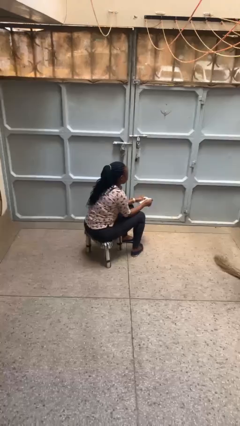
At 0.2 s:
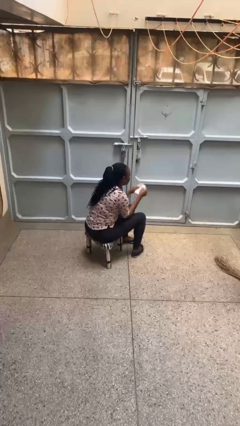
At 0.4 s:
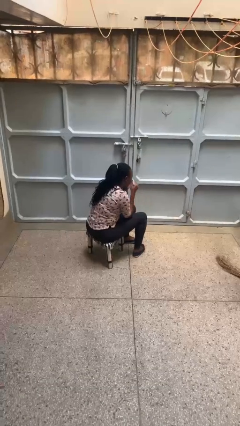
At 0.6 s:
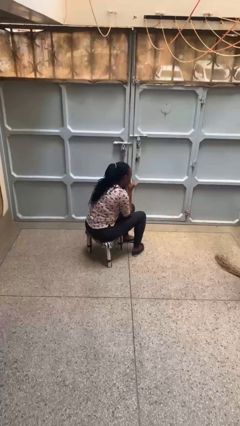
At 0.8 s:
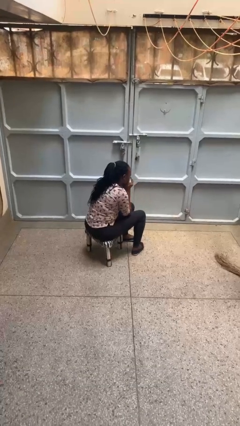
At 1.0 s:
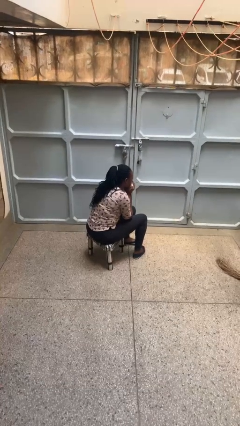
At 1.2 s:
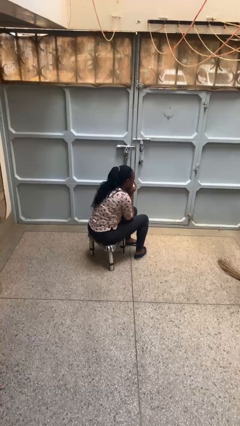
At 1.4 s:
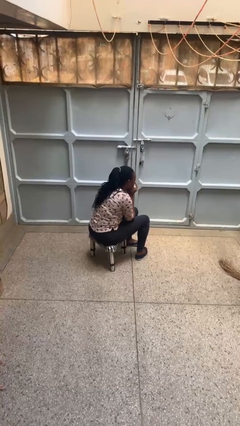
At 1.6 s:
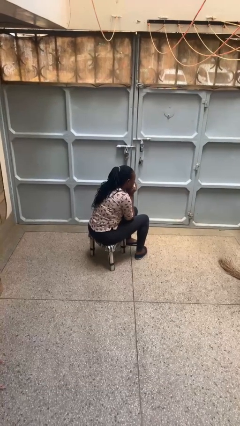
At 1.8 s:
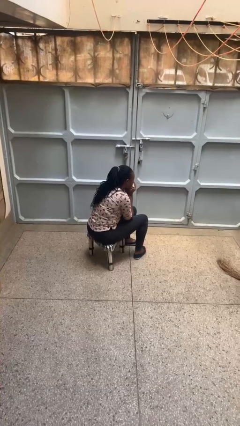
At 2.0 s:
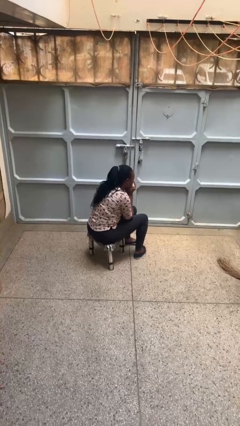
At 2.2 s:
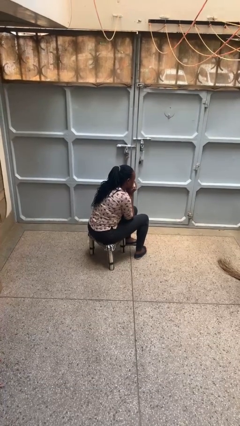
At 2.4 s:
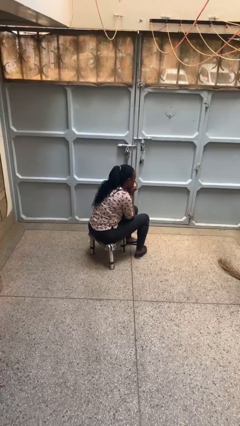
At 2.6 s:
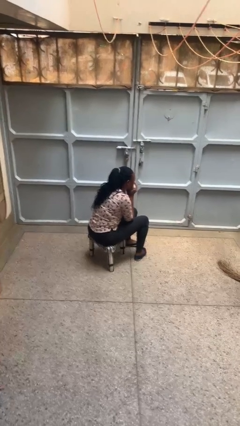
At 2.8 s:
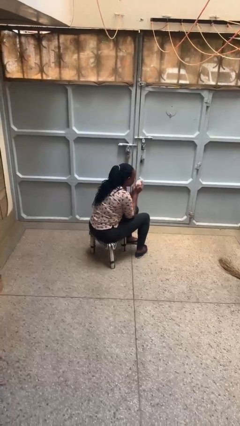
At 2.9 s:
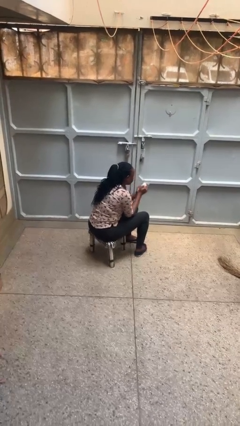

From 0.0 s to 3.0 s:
person blows nose

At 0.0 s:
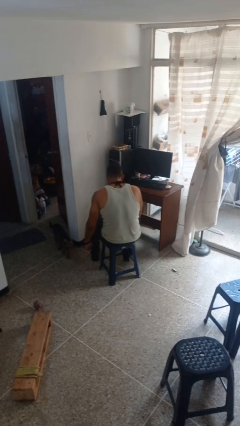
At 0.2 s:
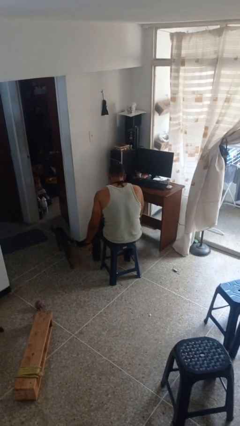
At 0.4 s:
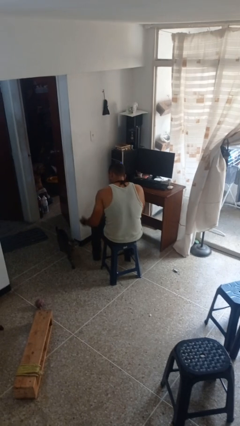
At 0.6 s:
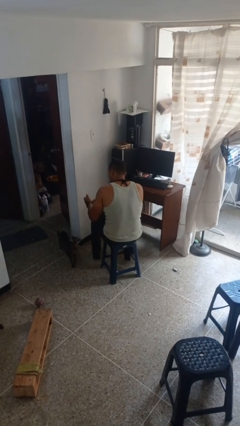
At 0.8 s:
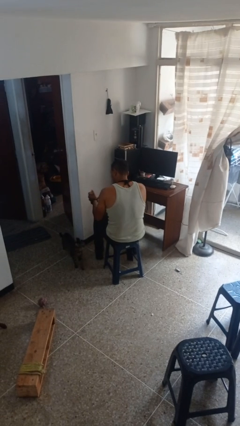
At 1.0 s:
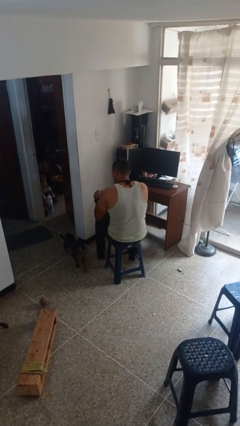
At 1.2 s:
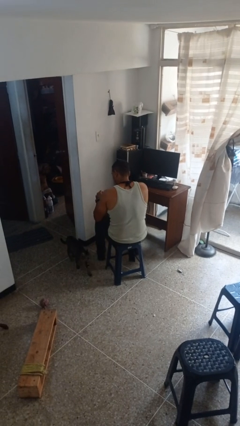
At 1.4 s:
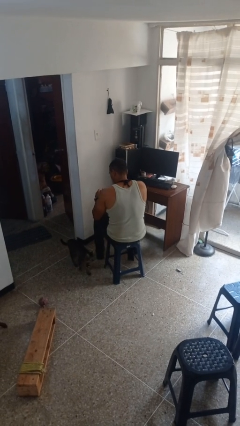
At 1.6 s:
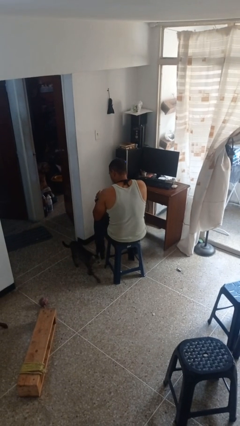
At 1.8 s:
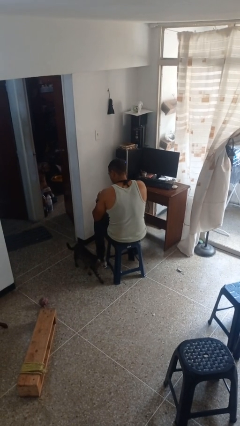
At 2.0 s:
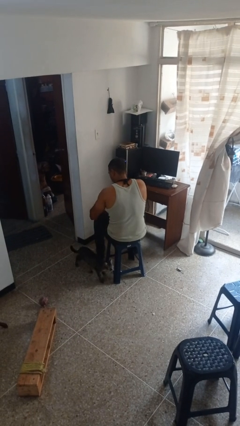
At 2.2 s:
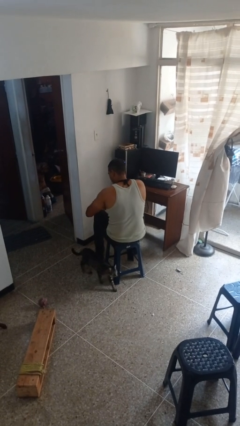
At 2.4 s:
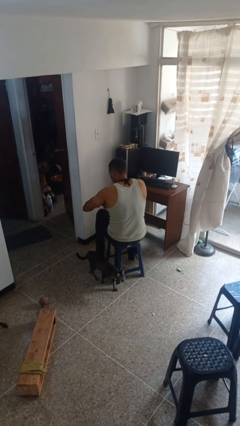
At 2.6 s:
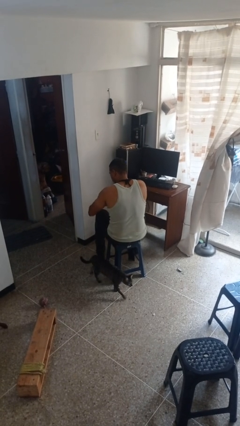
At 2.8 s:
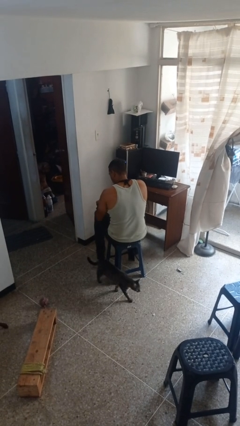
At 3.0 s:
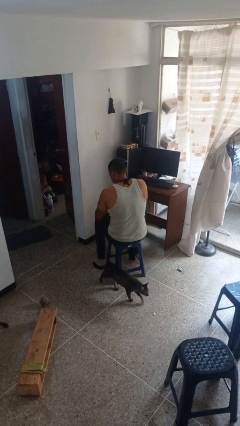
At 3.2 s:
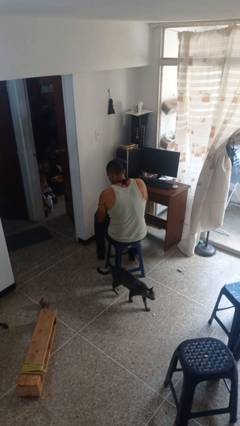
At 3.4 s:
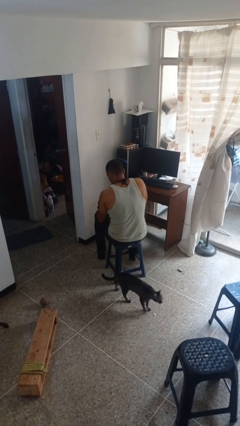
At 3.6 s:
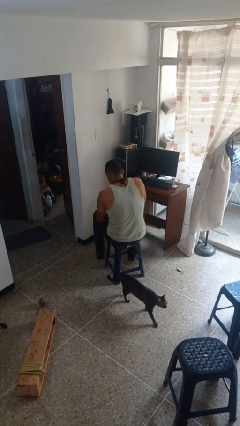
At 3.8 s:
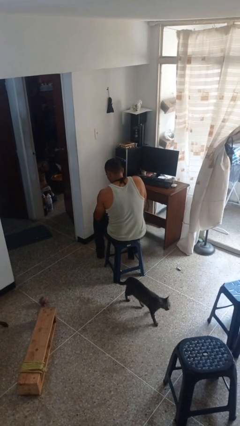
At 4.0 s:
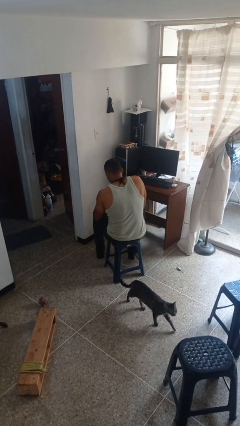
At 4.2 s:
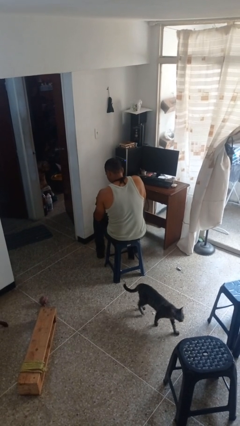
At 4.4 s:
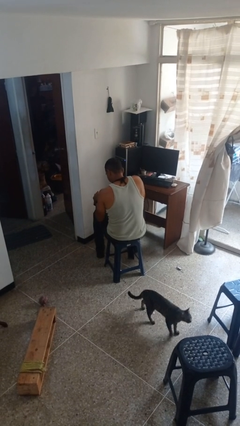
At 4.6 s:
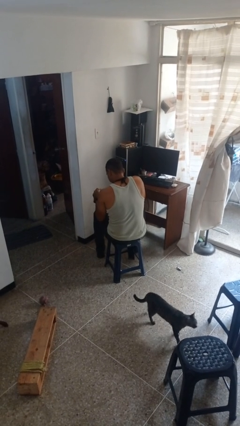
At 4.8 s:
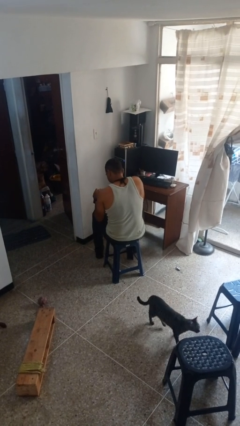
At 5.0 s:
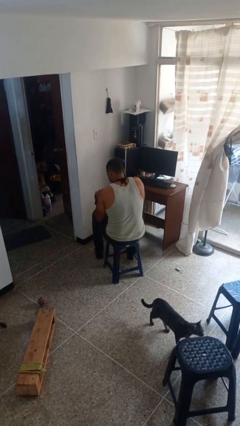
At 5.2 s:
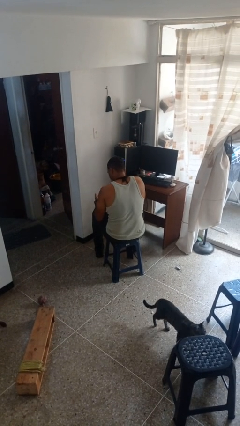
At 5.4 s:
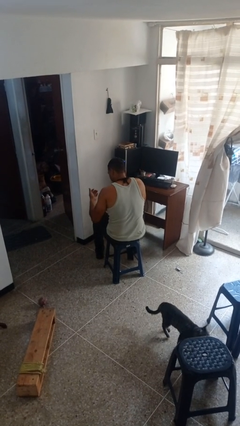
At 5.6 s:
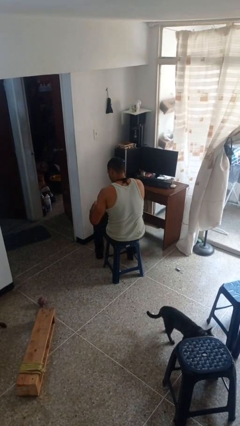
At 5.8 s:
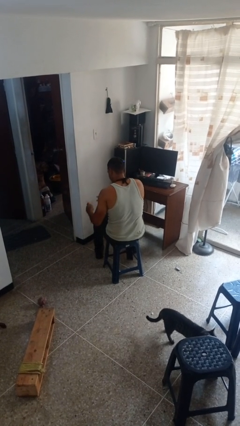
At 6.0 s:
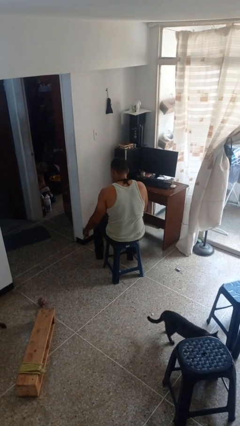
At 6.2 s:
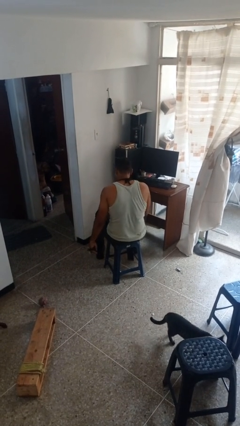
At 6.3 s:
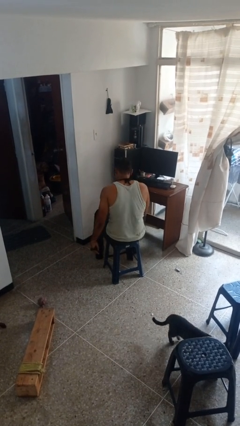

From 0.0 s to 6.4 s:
person takes off wristwatch

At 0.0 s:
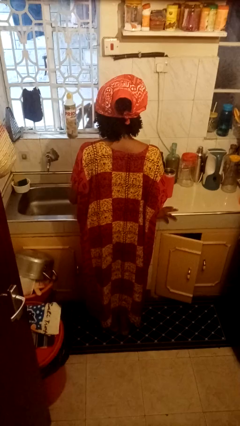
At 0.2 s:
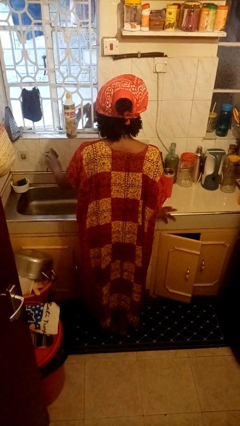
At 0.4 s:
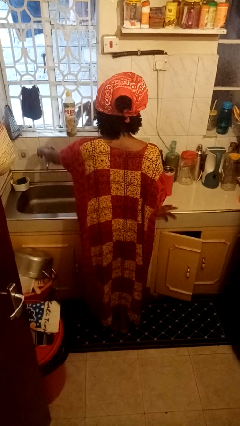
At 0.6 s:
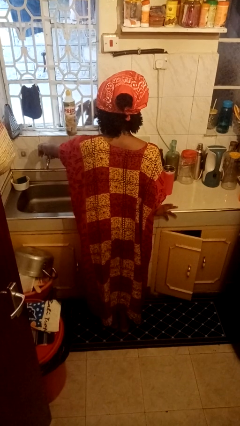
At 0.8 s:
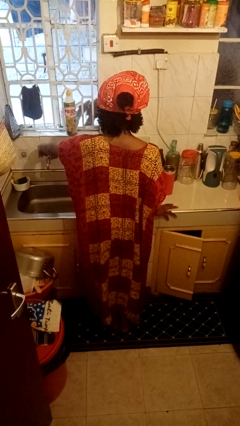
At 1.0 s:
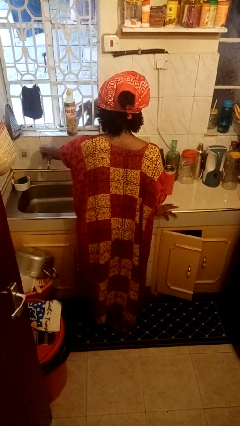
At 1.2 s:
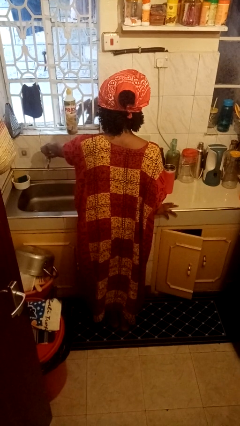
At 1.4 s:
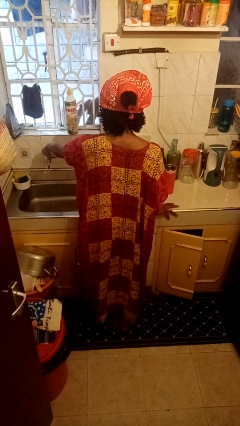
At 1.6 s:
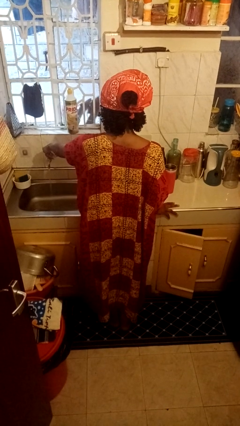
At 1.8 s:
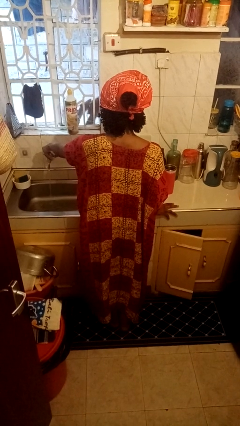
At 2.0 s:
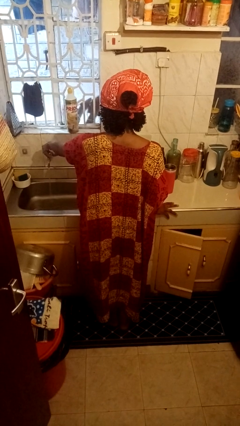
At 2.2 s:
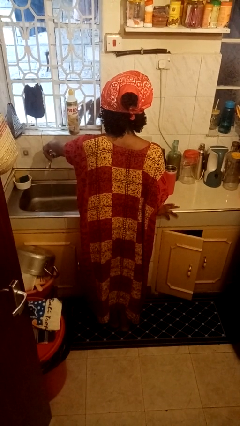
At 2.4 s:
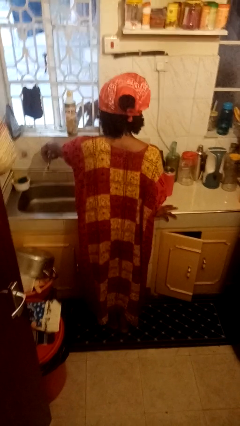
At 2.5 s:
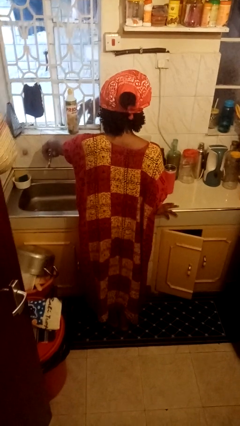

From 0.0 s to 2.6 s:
person turns on faucet

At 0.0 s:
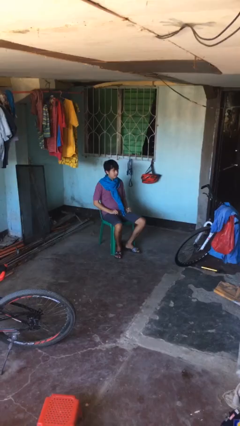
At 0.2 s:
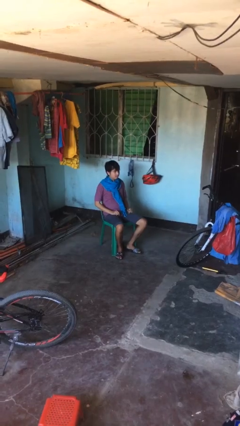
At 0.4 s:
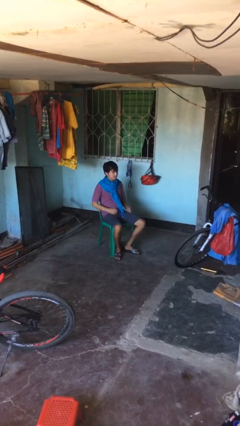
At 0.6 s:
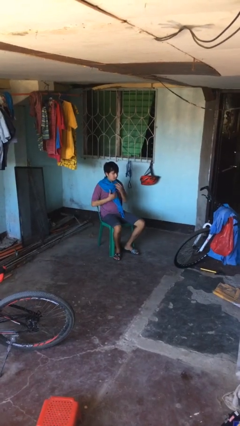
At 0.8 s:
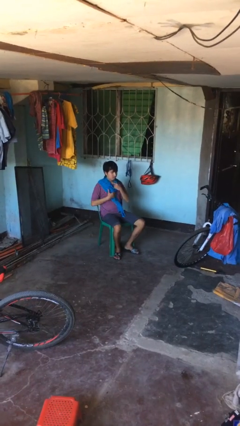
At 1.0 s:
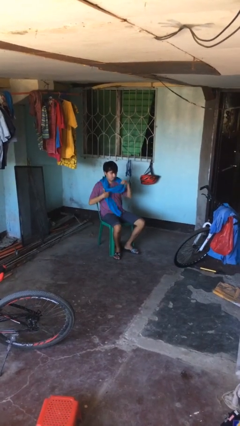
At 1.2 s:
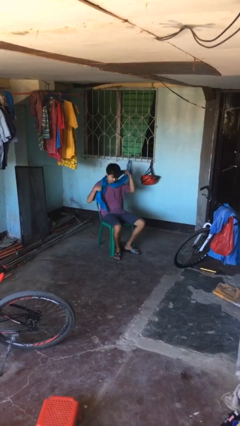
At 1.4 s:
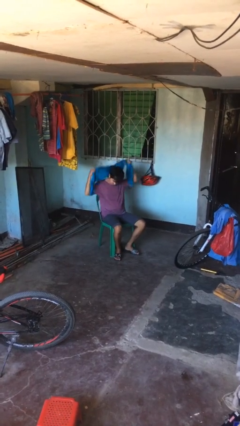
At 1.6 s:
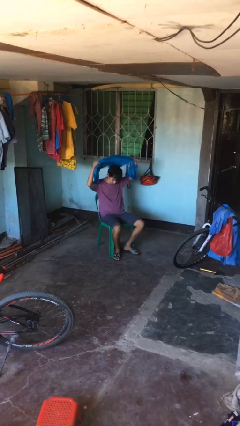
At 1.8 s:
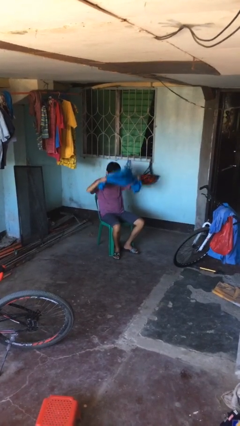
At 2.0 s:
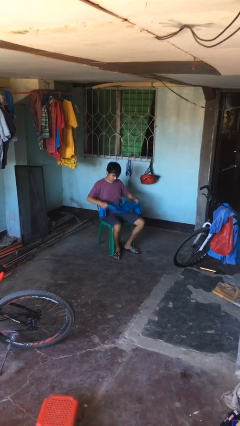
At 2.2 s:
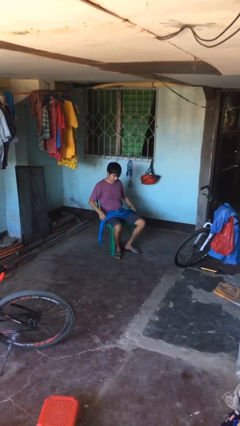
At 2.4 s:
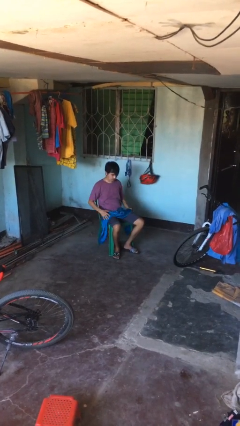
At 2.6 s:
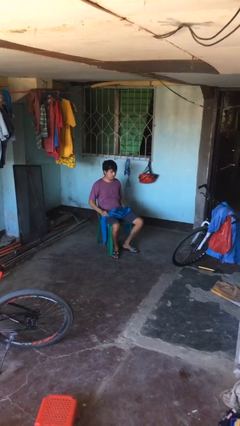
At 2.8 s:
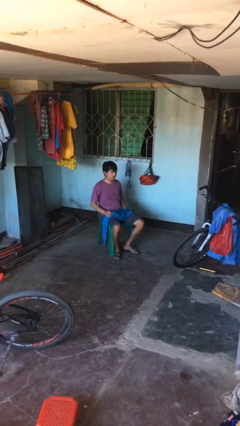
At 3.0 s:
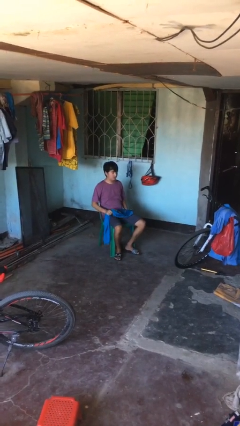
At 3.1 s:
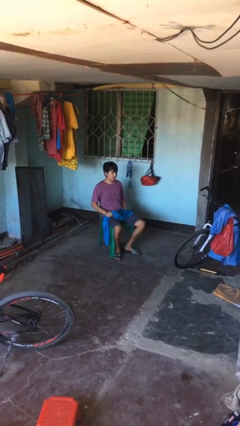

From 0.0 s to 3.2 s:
person takes off scarf

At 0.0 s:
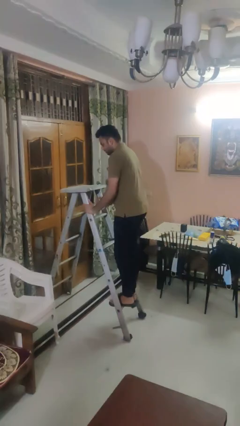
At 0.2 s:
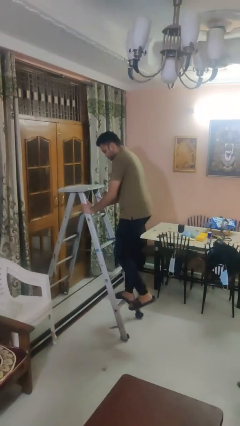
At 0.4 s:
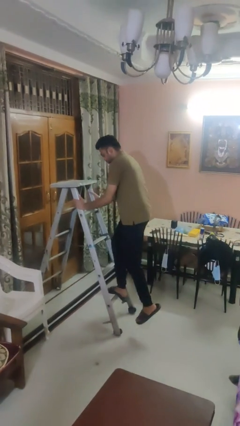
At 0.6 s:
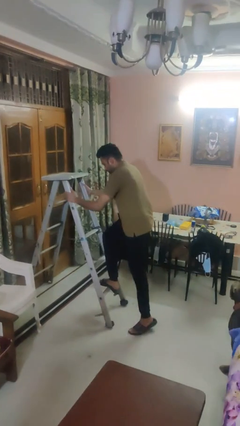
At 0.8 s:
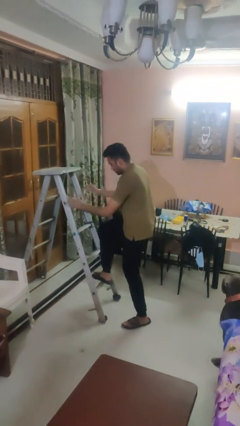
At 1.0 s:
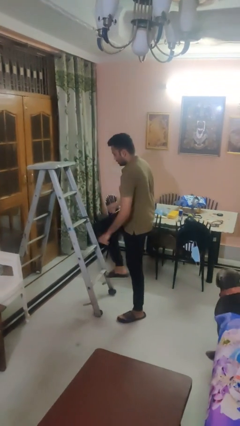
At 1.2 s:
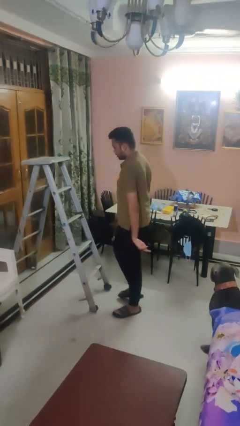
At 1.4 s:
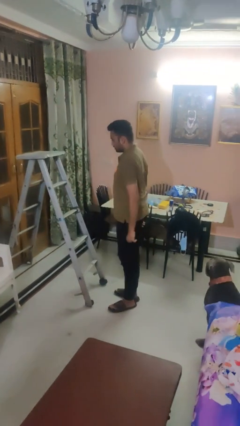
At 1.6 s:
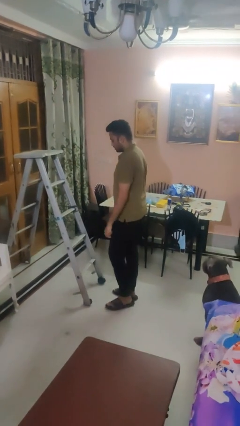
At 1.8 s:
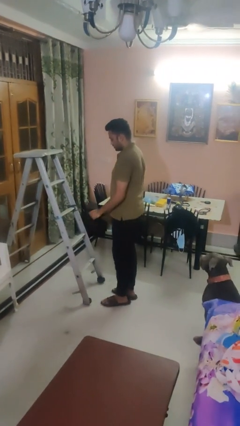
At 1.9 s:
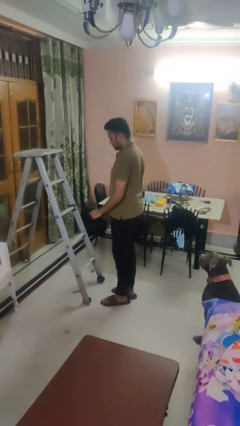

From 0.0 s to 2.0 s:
person climbs down ladder

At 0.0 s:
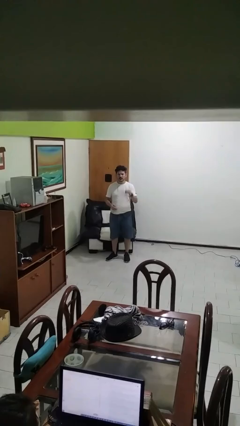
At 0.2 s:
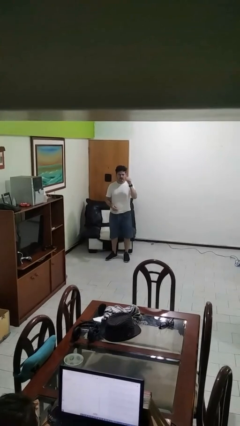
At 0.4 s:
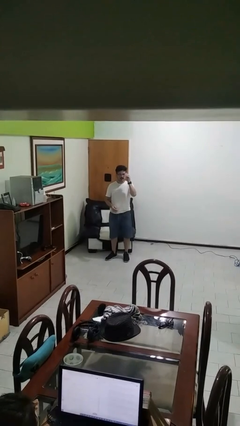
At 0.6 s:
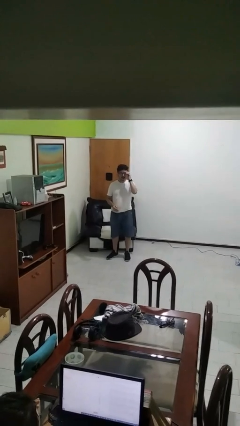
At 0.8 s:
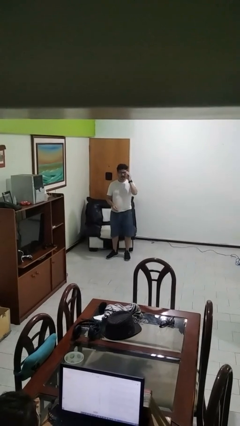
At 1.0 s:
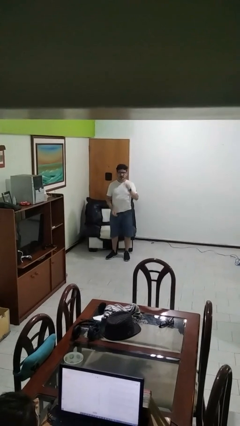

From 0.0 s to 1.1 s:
person puts on glasses
